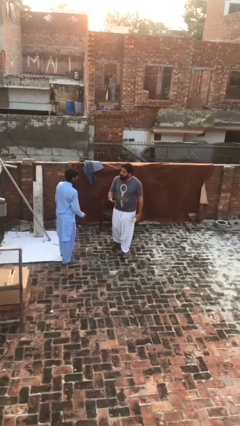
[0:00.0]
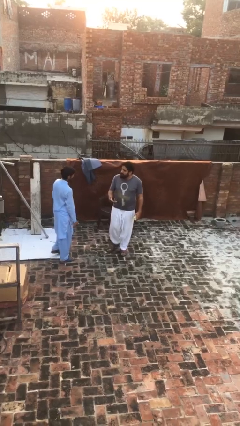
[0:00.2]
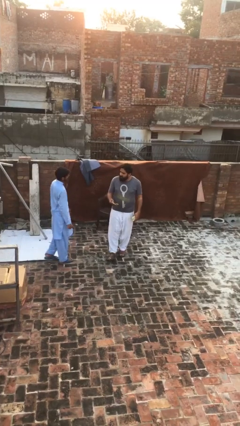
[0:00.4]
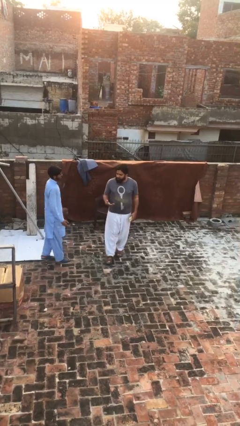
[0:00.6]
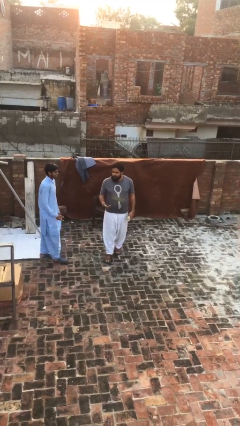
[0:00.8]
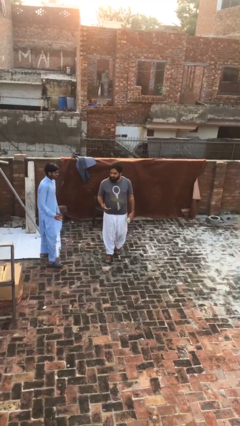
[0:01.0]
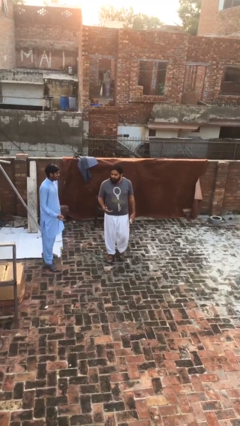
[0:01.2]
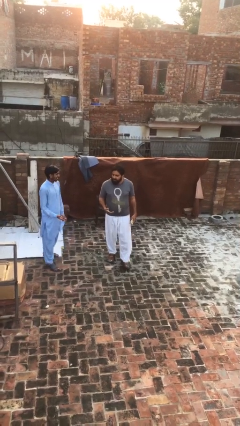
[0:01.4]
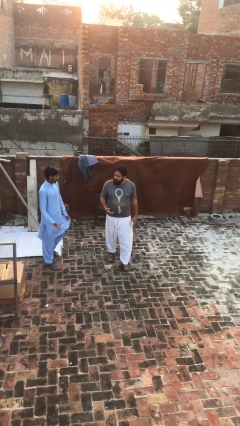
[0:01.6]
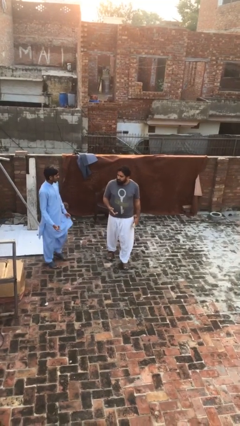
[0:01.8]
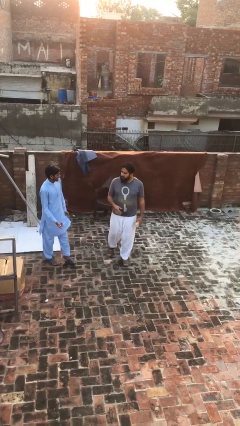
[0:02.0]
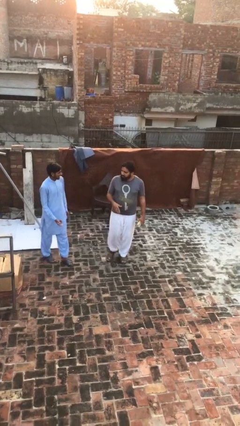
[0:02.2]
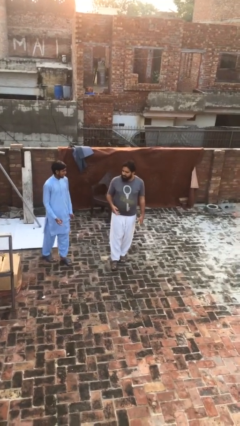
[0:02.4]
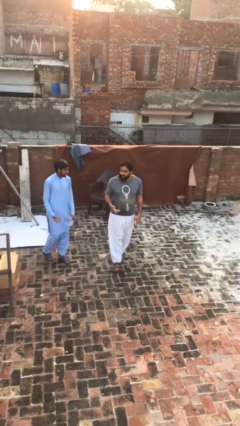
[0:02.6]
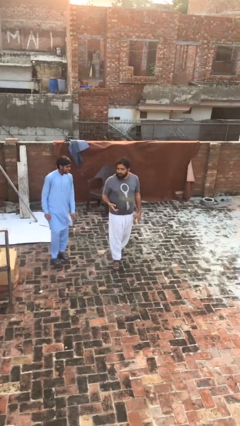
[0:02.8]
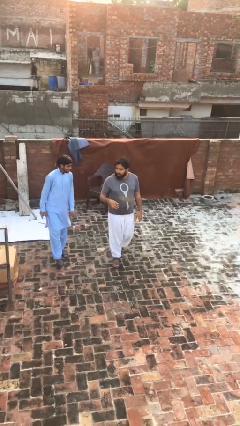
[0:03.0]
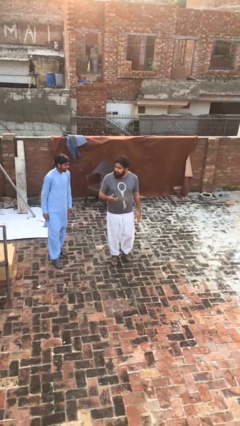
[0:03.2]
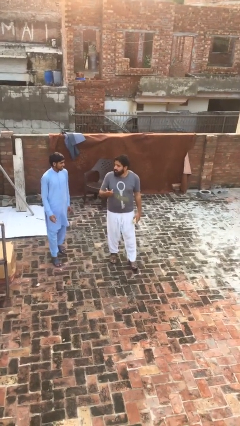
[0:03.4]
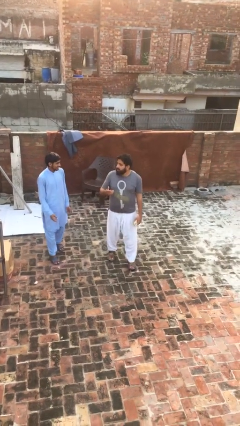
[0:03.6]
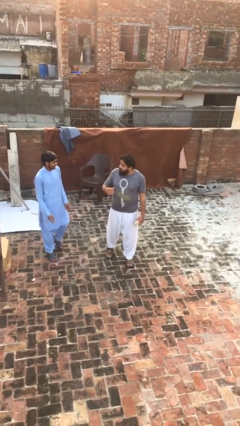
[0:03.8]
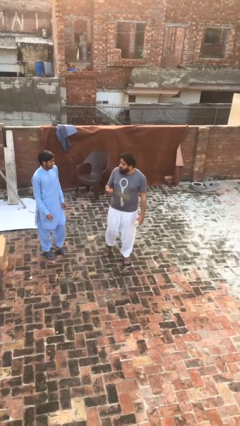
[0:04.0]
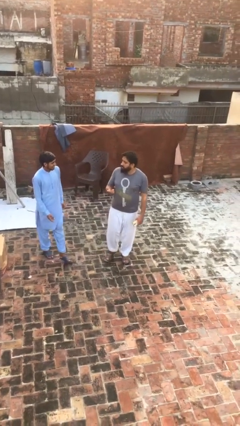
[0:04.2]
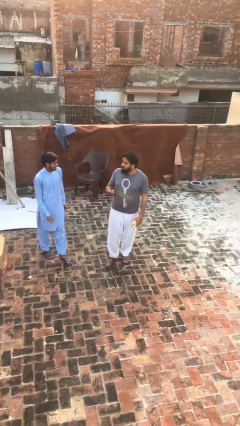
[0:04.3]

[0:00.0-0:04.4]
person talks to person

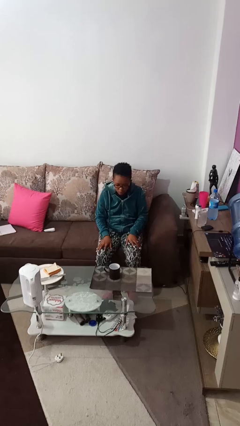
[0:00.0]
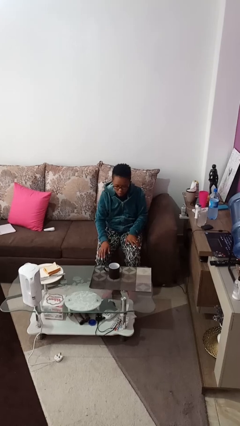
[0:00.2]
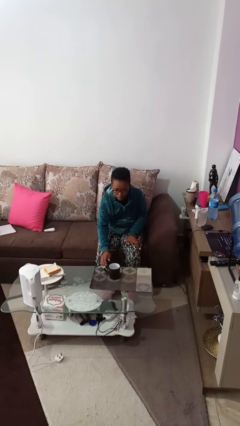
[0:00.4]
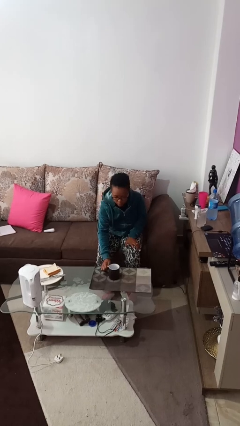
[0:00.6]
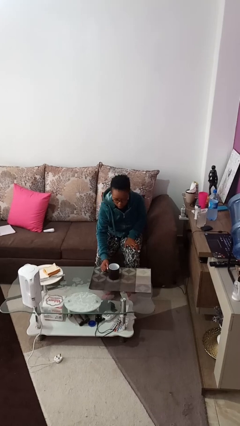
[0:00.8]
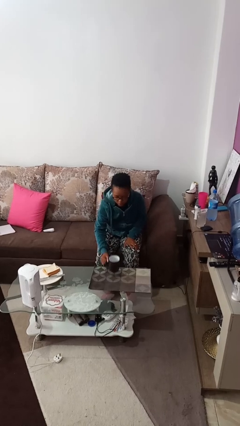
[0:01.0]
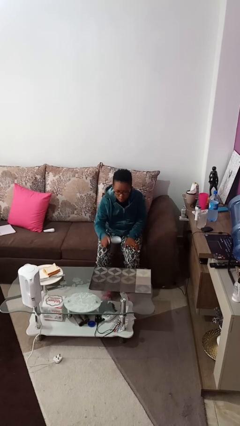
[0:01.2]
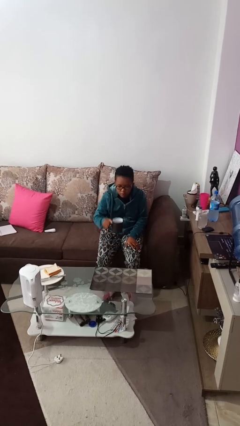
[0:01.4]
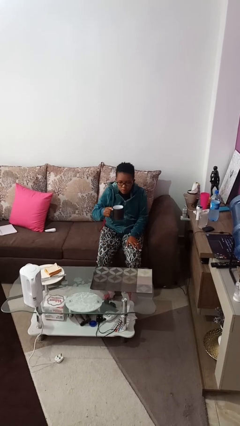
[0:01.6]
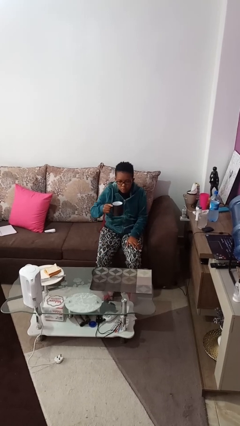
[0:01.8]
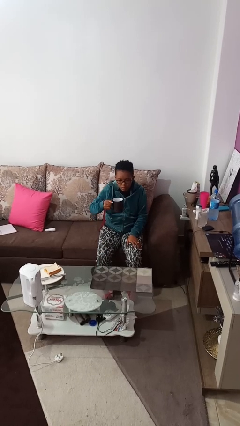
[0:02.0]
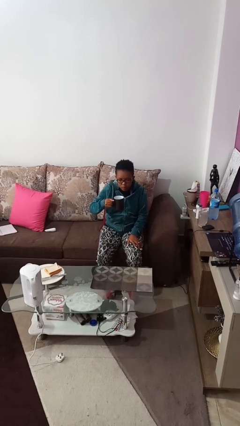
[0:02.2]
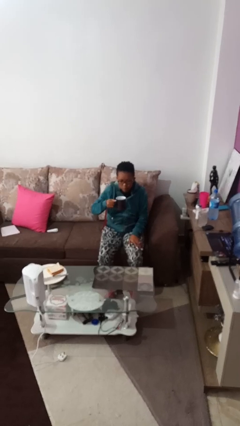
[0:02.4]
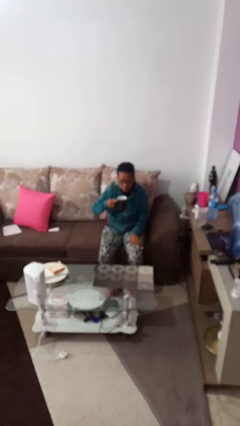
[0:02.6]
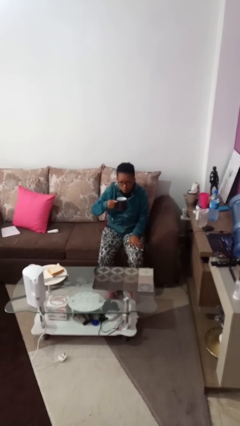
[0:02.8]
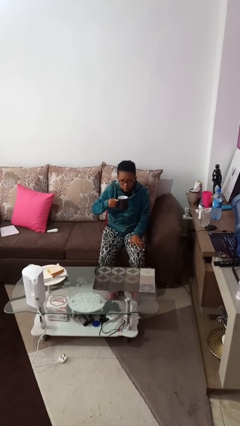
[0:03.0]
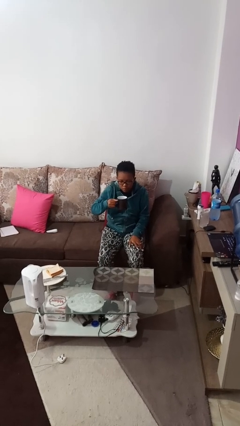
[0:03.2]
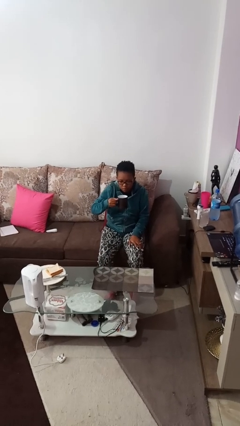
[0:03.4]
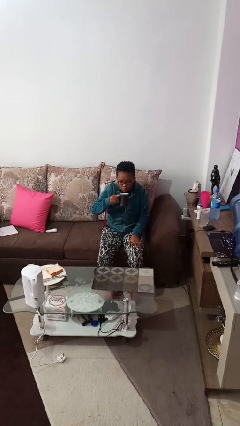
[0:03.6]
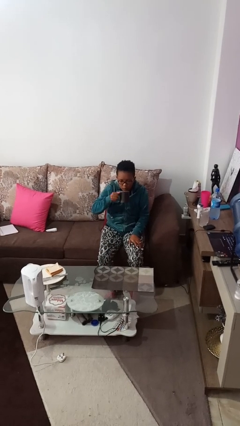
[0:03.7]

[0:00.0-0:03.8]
person picks up object from table

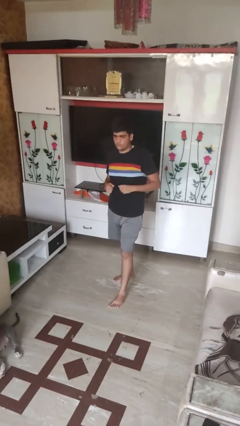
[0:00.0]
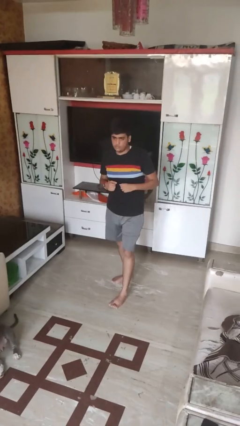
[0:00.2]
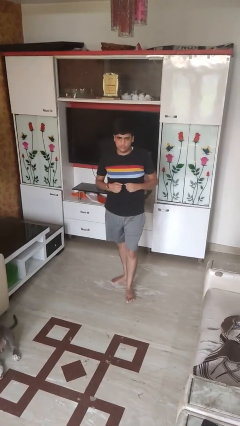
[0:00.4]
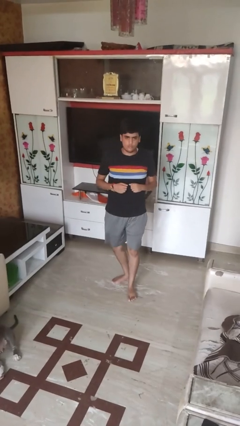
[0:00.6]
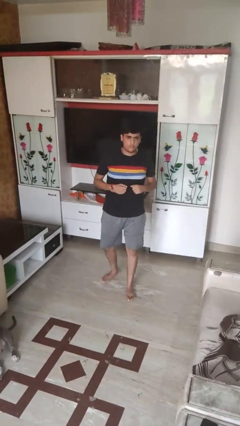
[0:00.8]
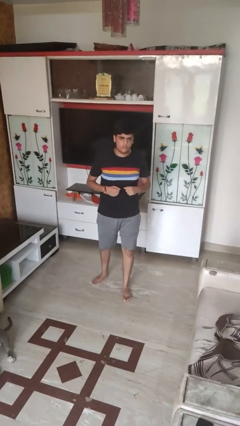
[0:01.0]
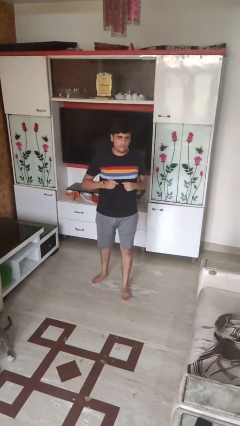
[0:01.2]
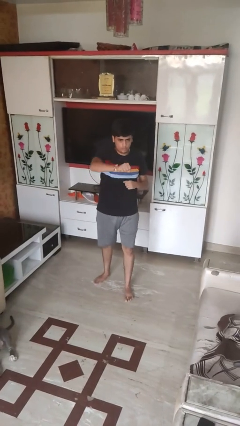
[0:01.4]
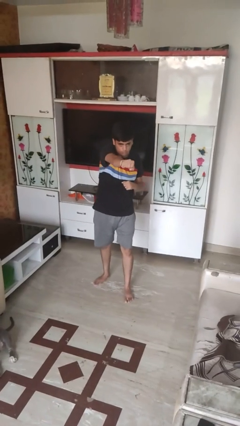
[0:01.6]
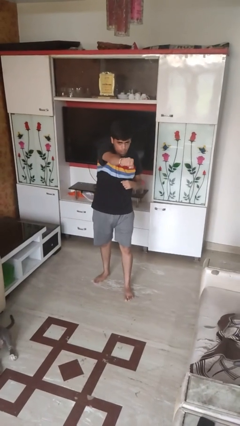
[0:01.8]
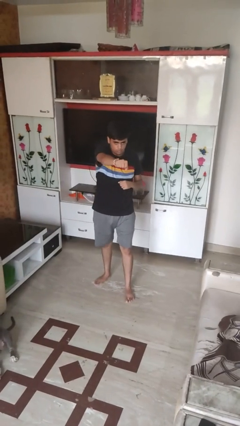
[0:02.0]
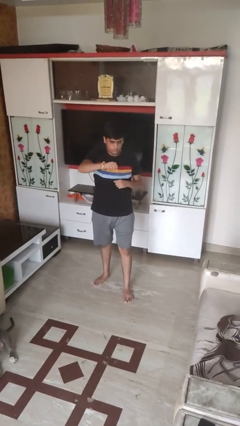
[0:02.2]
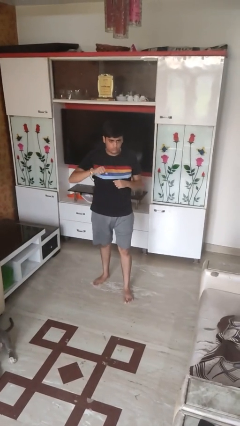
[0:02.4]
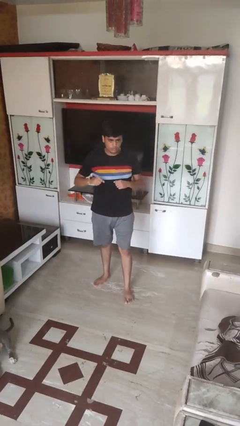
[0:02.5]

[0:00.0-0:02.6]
person punches

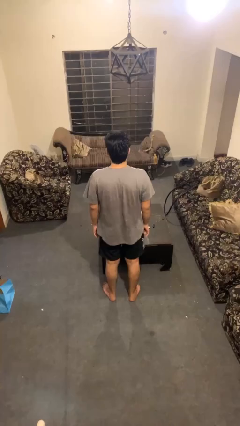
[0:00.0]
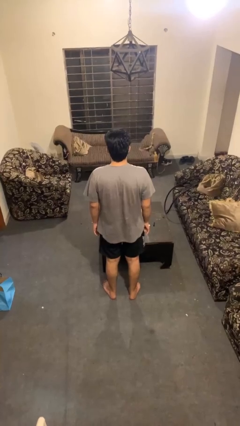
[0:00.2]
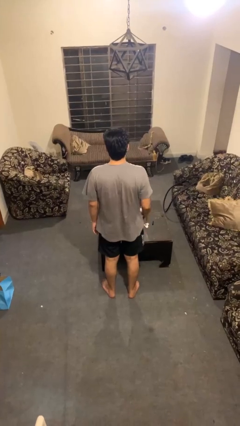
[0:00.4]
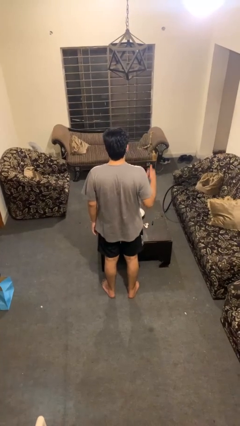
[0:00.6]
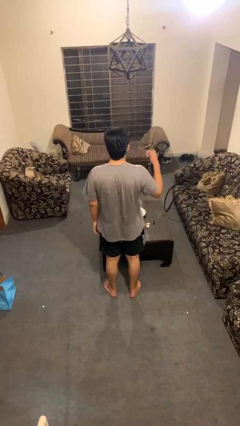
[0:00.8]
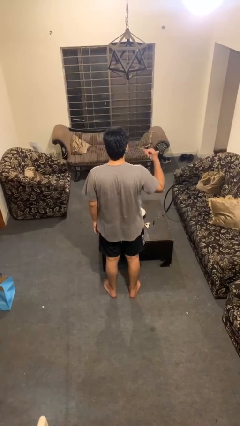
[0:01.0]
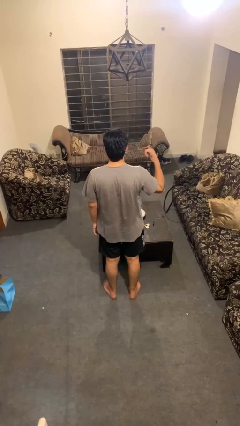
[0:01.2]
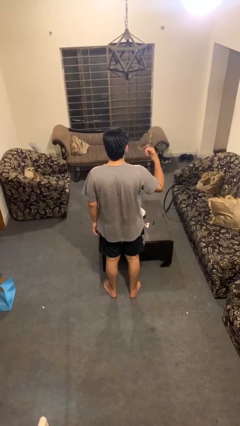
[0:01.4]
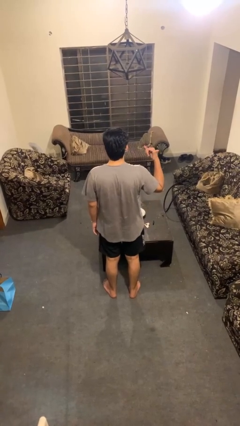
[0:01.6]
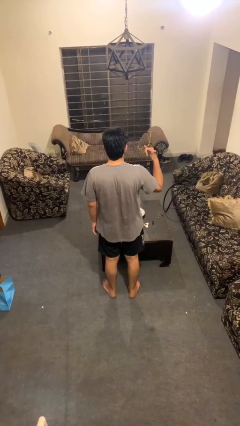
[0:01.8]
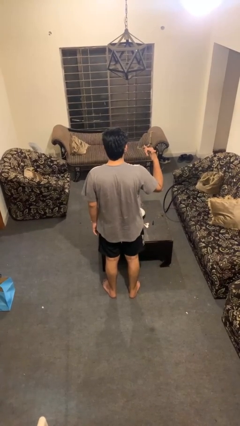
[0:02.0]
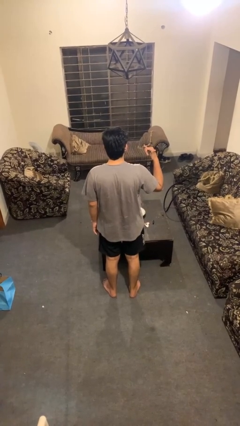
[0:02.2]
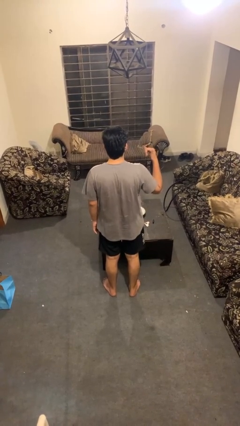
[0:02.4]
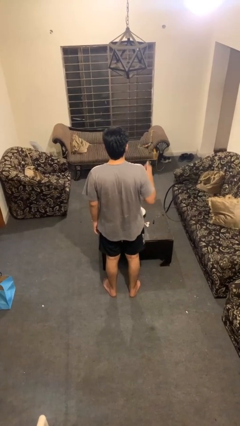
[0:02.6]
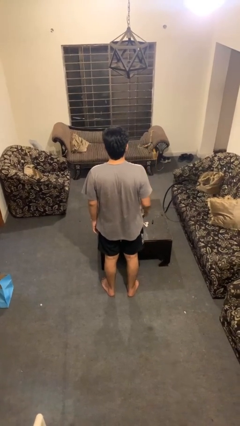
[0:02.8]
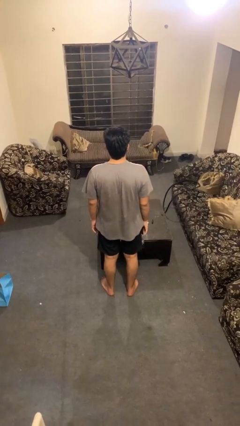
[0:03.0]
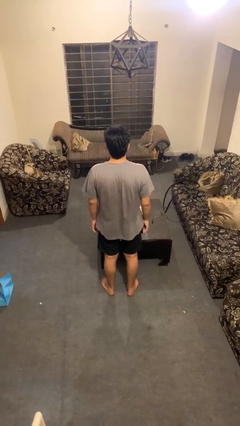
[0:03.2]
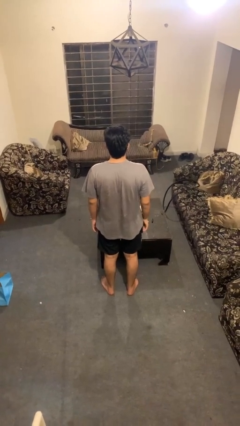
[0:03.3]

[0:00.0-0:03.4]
person gestures hang loose

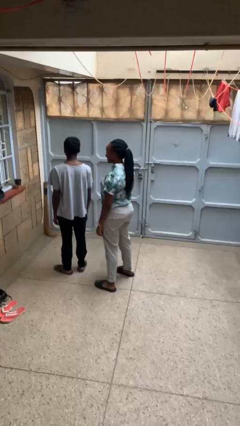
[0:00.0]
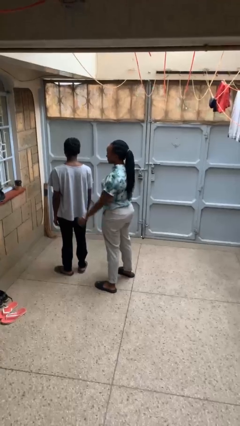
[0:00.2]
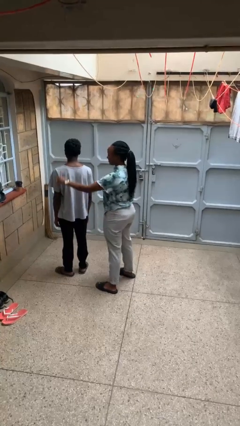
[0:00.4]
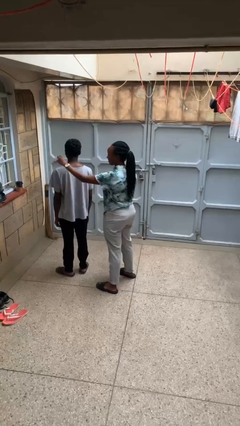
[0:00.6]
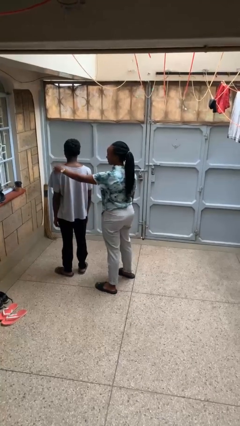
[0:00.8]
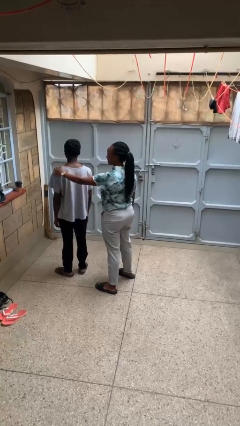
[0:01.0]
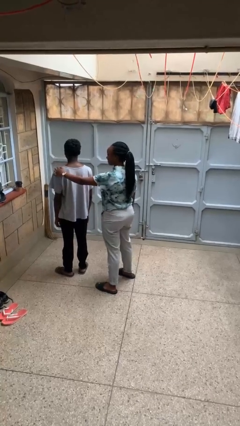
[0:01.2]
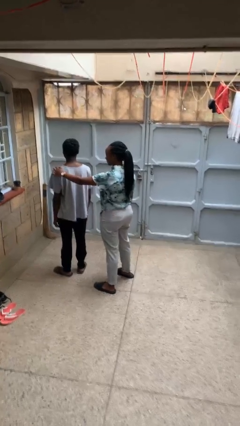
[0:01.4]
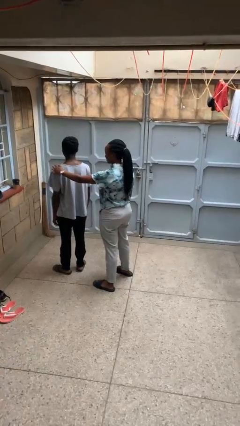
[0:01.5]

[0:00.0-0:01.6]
person grabs person by shoulder

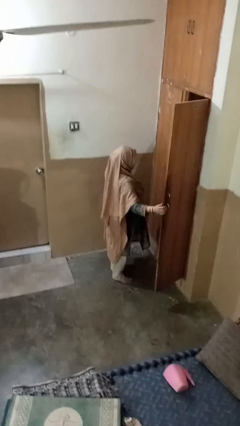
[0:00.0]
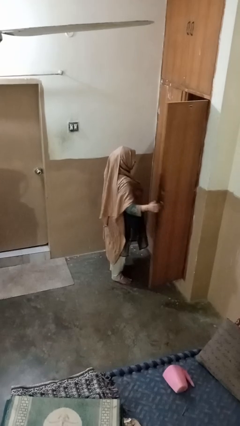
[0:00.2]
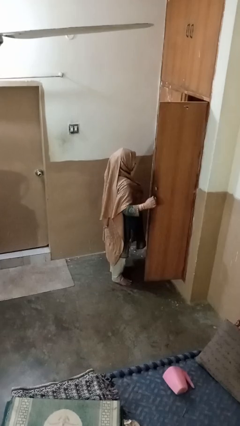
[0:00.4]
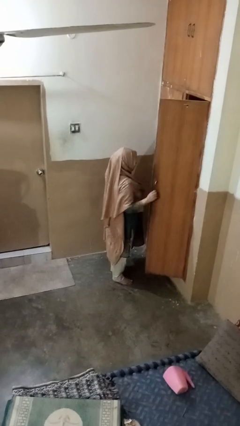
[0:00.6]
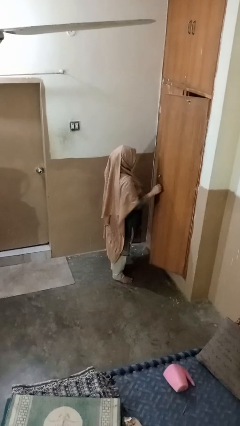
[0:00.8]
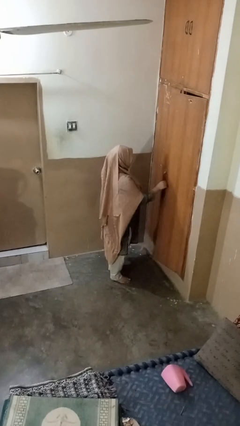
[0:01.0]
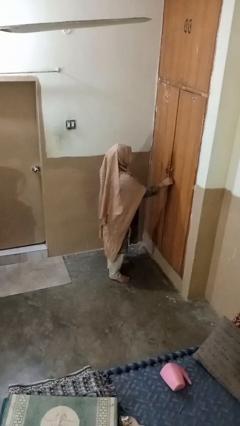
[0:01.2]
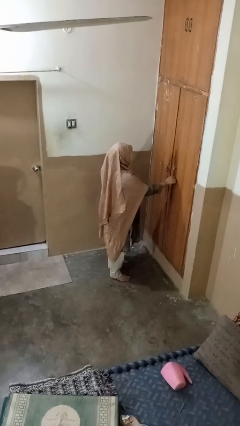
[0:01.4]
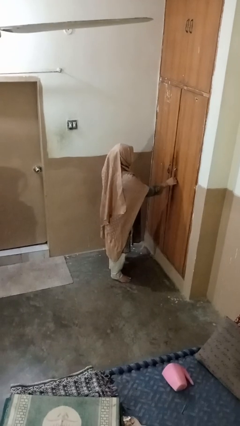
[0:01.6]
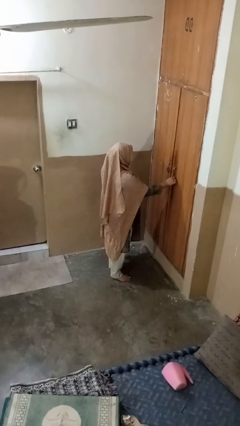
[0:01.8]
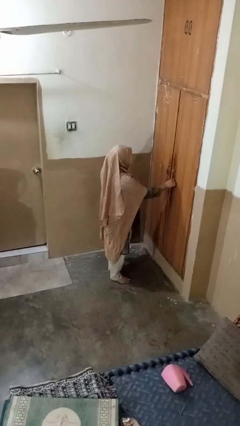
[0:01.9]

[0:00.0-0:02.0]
person closes closet door
